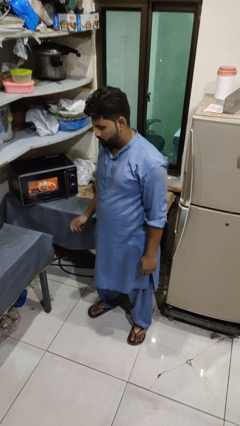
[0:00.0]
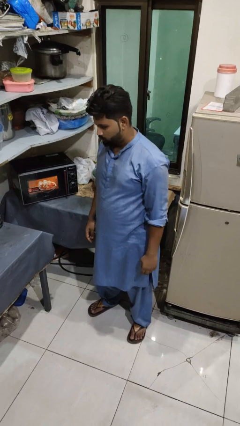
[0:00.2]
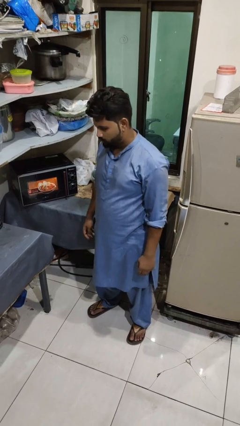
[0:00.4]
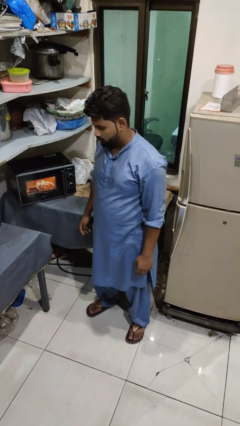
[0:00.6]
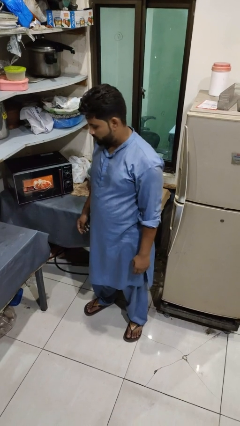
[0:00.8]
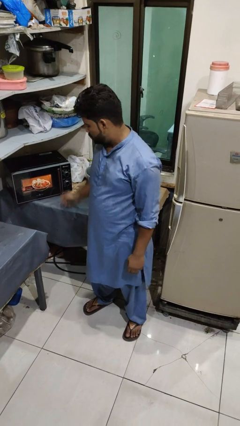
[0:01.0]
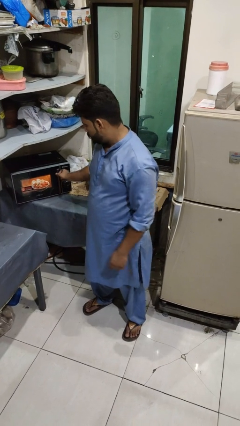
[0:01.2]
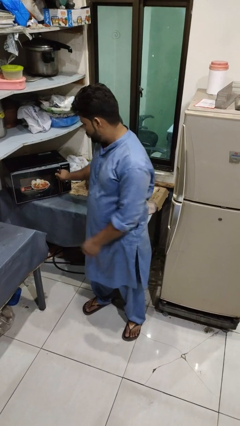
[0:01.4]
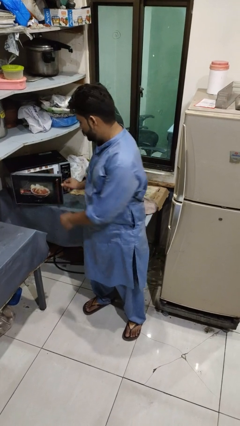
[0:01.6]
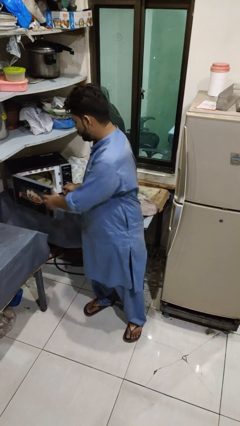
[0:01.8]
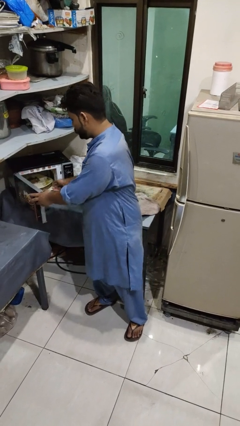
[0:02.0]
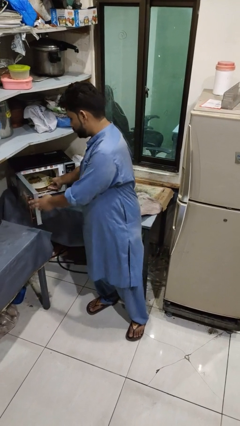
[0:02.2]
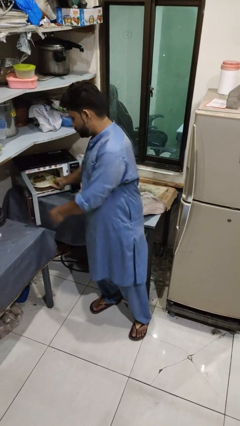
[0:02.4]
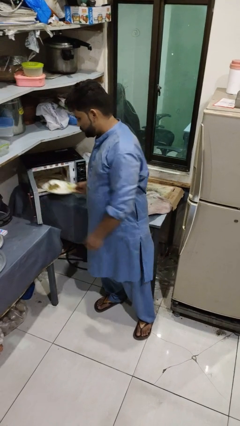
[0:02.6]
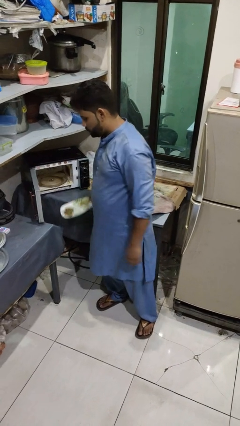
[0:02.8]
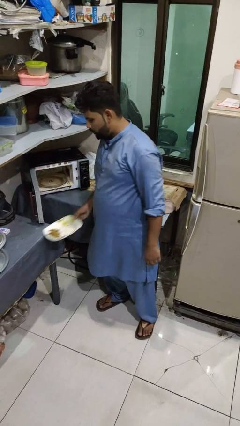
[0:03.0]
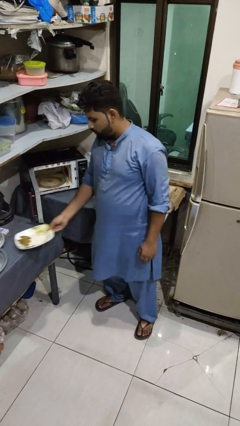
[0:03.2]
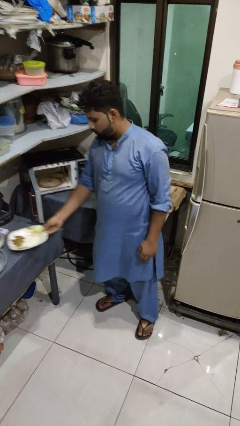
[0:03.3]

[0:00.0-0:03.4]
person takes object from microwave

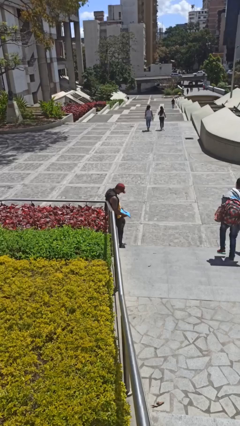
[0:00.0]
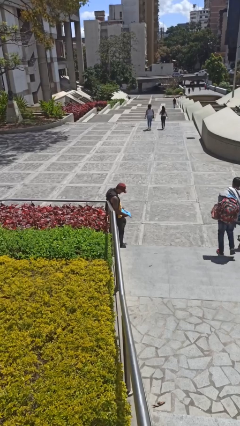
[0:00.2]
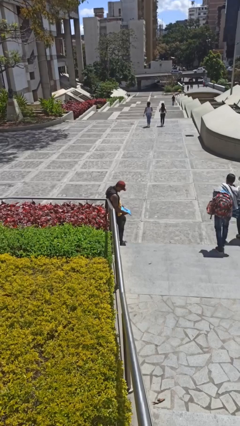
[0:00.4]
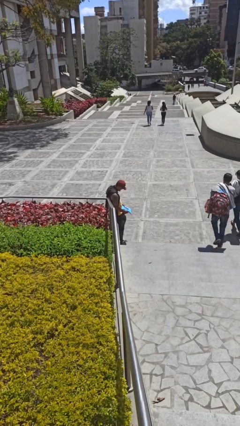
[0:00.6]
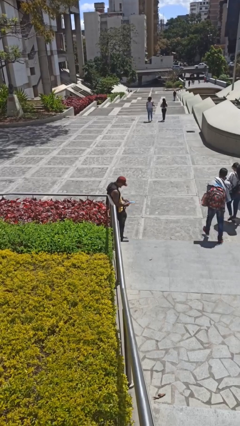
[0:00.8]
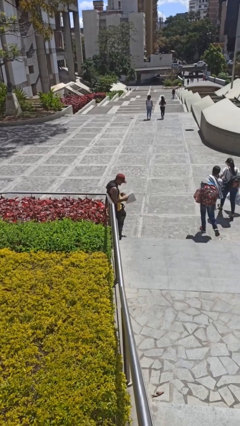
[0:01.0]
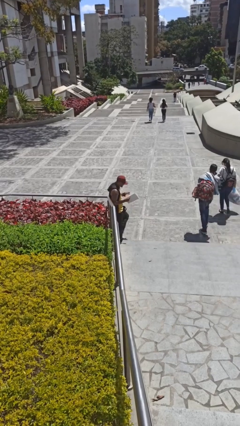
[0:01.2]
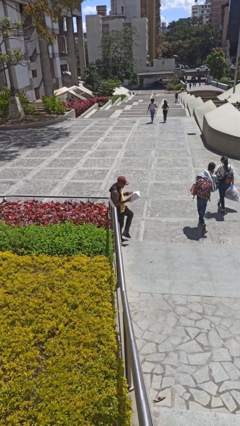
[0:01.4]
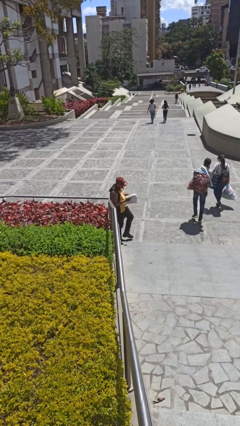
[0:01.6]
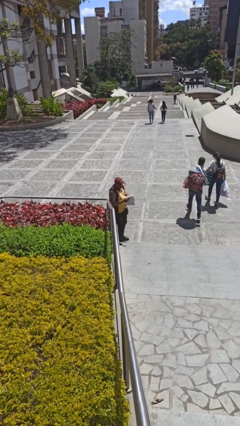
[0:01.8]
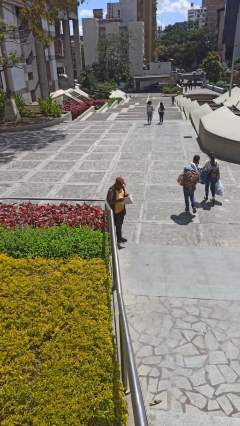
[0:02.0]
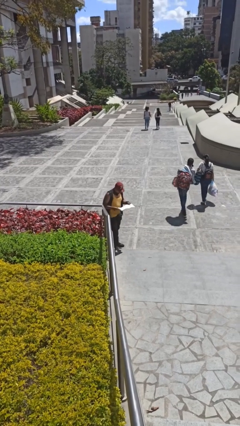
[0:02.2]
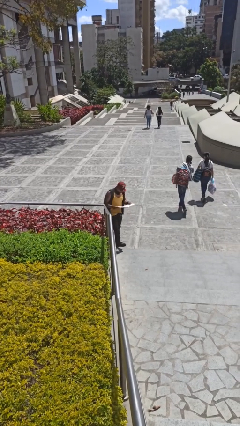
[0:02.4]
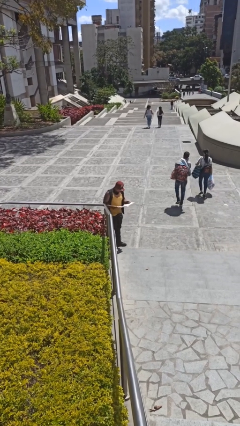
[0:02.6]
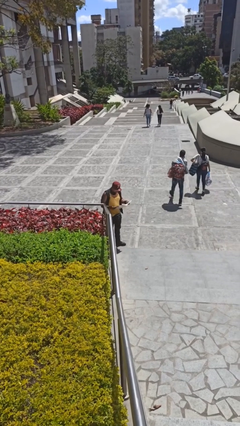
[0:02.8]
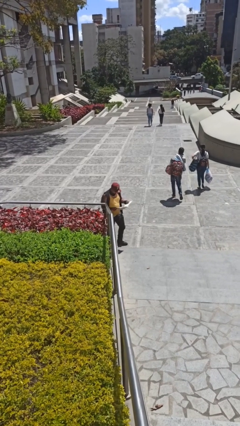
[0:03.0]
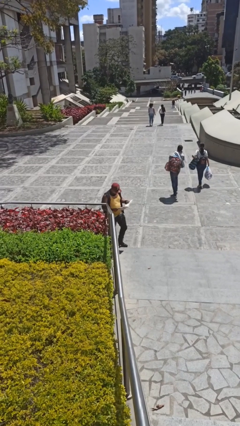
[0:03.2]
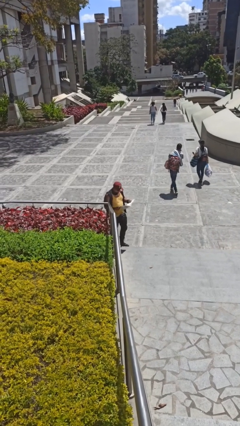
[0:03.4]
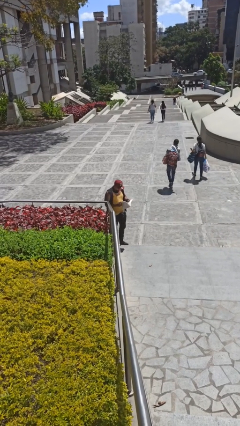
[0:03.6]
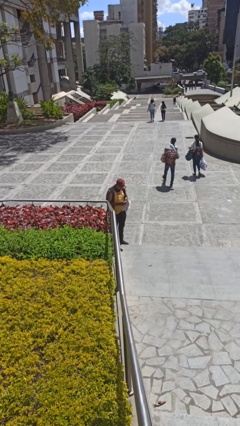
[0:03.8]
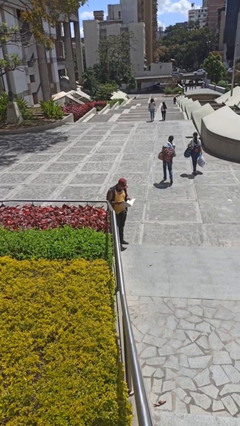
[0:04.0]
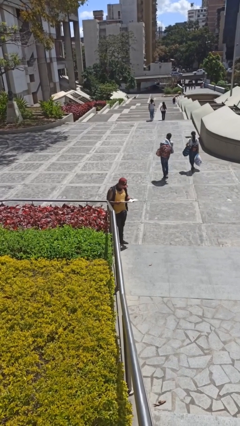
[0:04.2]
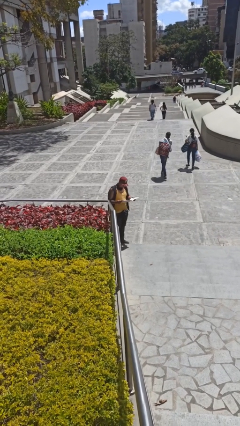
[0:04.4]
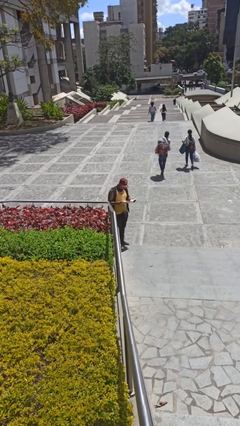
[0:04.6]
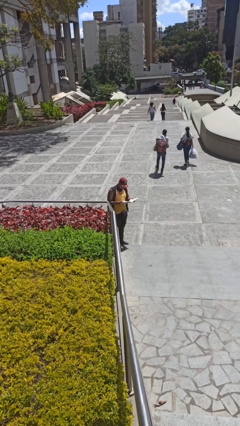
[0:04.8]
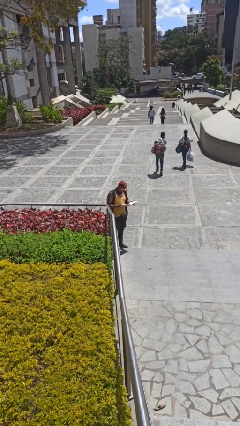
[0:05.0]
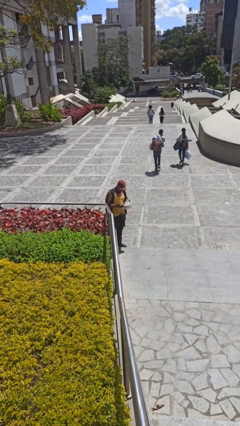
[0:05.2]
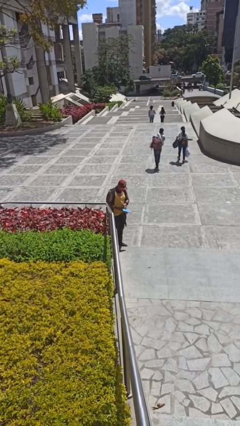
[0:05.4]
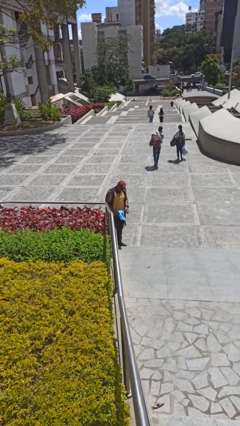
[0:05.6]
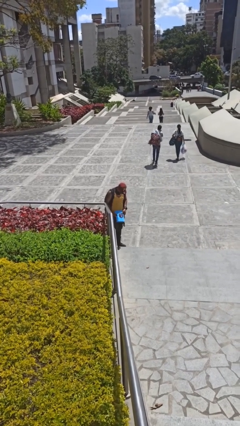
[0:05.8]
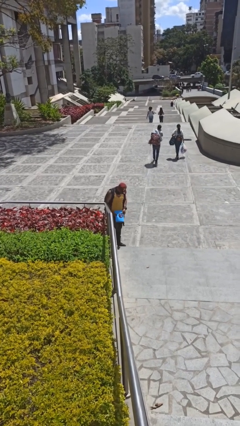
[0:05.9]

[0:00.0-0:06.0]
person reads document

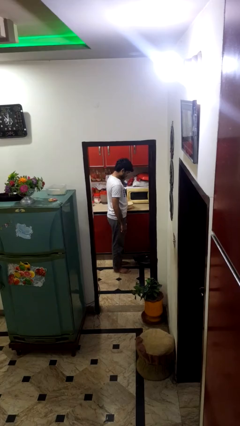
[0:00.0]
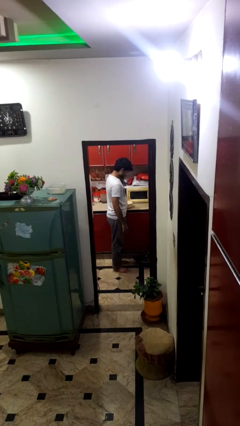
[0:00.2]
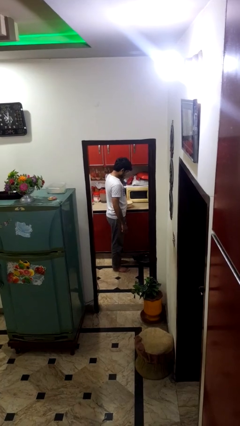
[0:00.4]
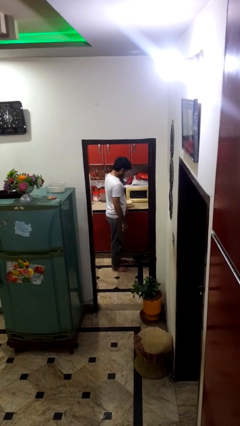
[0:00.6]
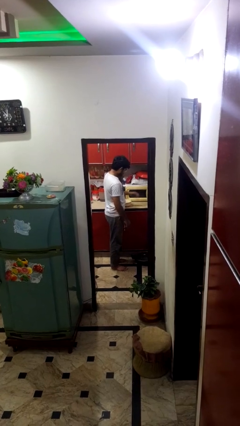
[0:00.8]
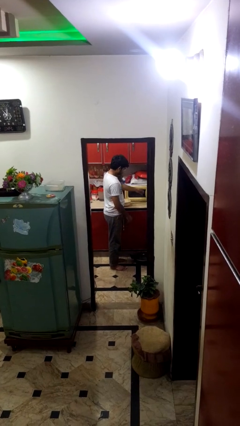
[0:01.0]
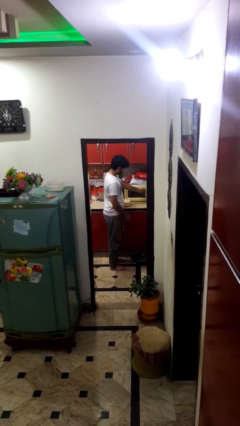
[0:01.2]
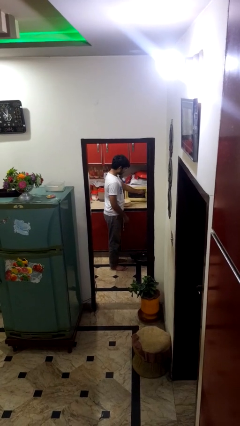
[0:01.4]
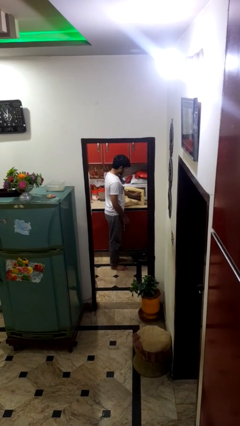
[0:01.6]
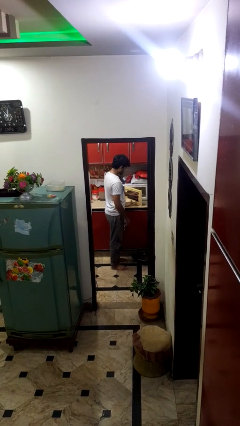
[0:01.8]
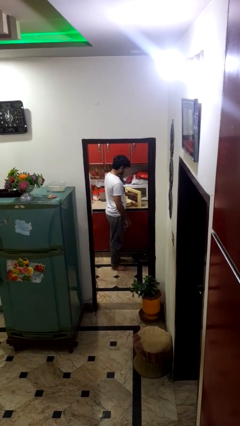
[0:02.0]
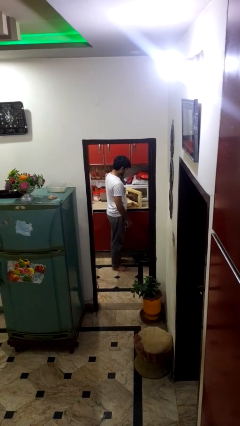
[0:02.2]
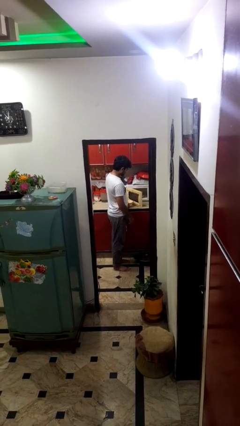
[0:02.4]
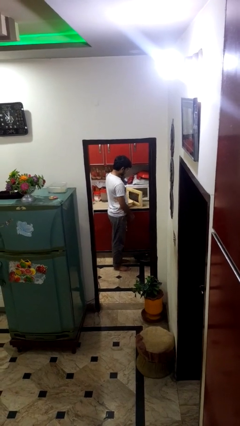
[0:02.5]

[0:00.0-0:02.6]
person opens microwave

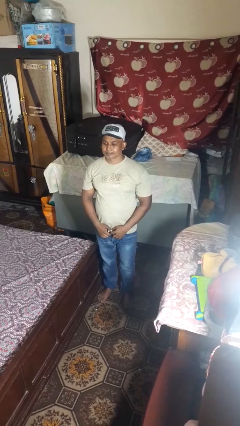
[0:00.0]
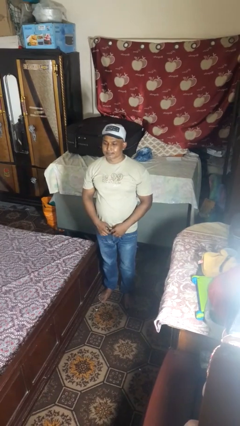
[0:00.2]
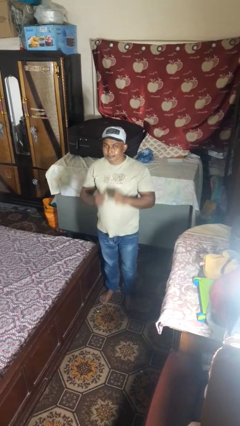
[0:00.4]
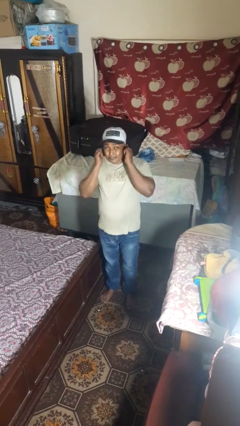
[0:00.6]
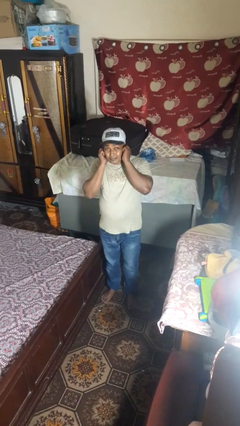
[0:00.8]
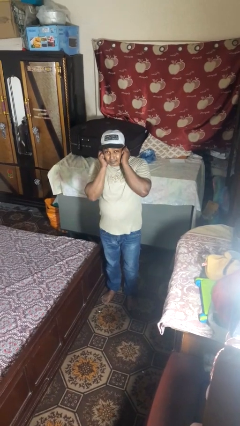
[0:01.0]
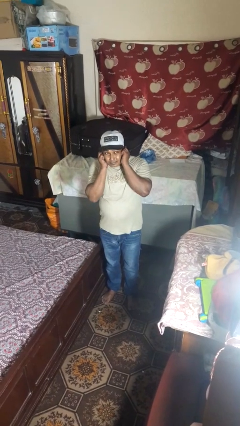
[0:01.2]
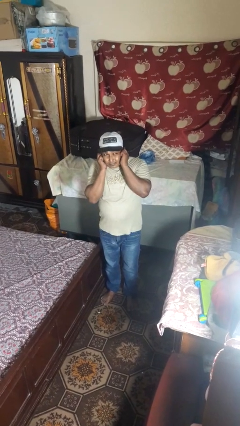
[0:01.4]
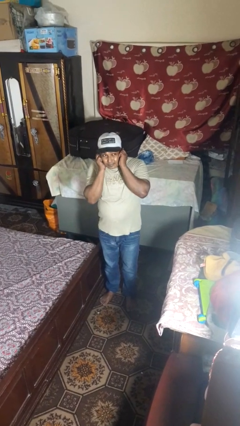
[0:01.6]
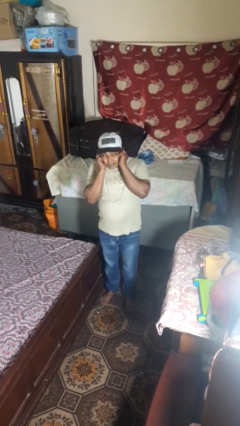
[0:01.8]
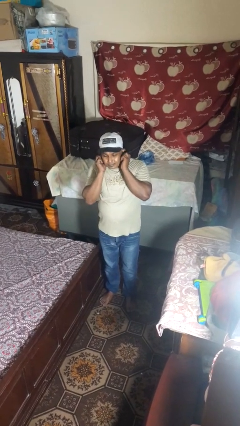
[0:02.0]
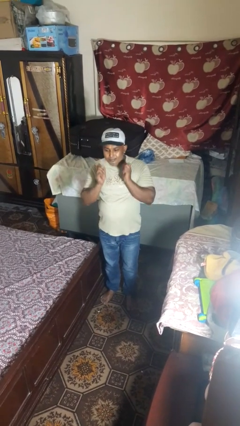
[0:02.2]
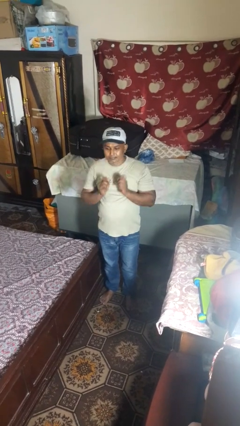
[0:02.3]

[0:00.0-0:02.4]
person puts fingers in ear

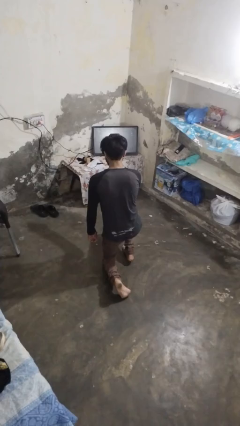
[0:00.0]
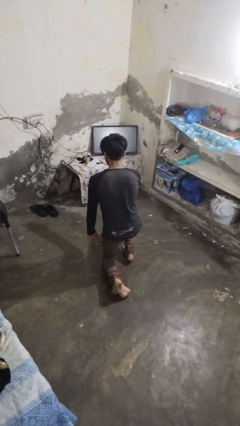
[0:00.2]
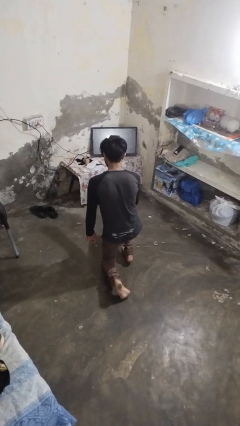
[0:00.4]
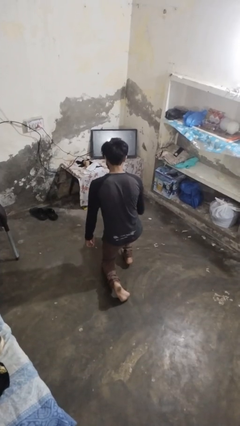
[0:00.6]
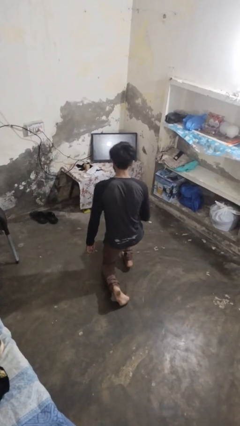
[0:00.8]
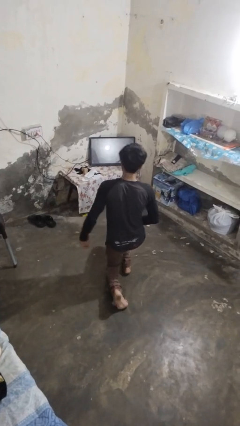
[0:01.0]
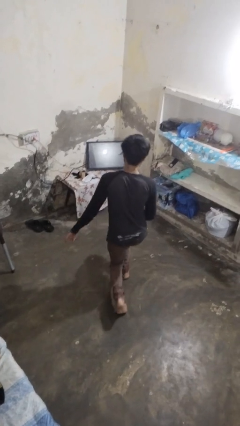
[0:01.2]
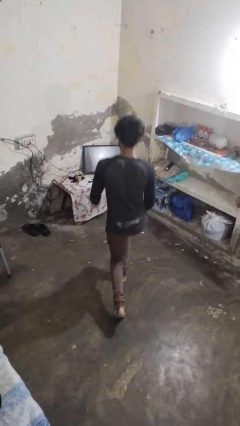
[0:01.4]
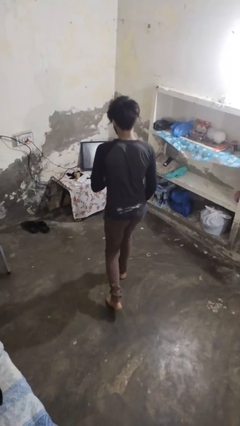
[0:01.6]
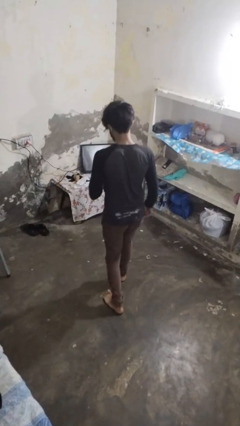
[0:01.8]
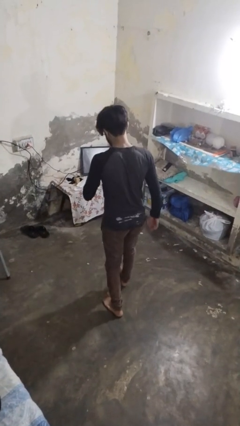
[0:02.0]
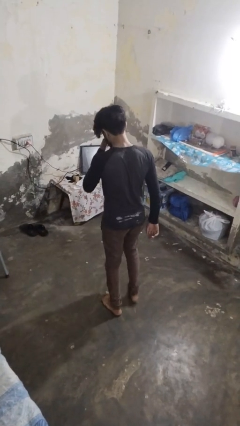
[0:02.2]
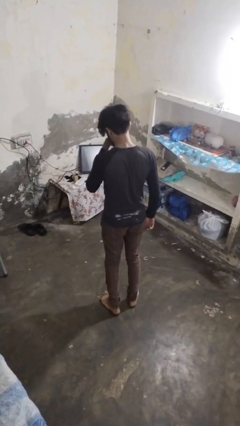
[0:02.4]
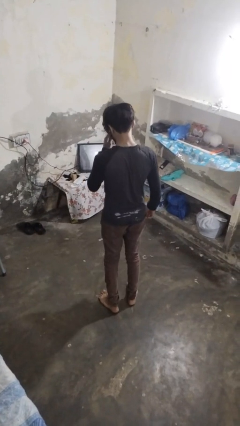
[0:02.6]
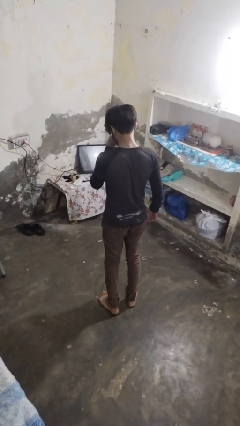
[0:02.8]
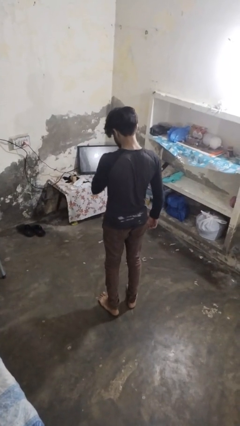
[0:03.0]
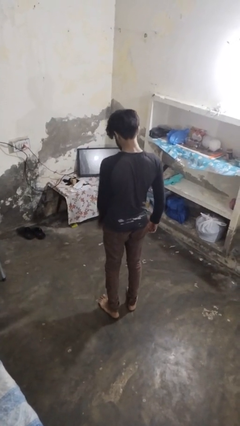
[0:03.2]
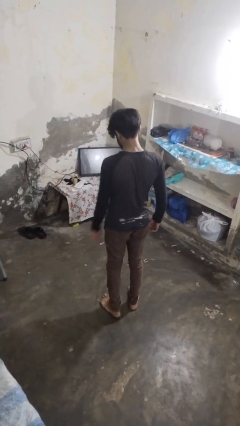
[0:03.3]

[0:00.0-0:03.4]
person stands up from floor
